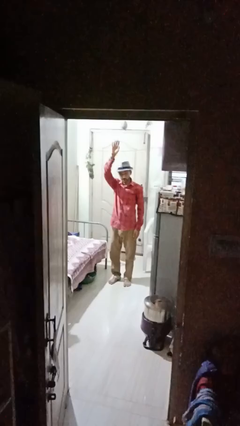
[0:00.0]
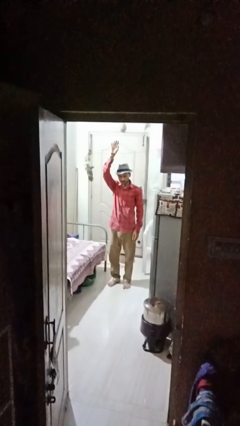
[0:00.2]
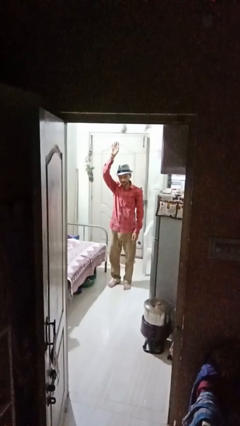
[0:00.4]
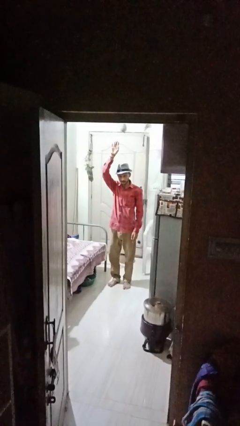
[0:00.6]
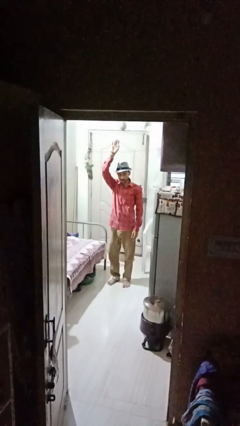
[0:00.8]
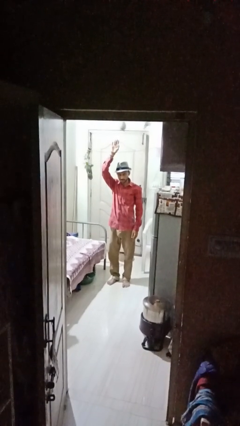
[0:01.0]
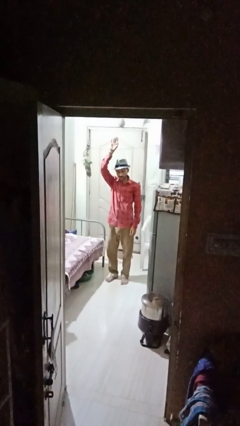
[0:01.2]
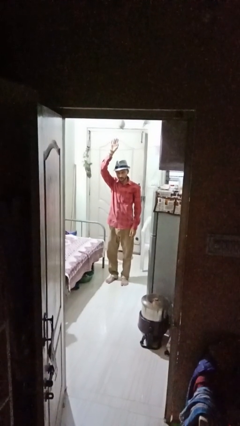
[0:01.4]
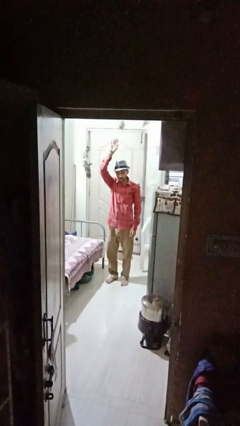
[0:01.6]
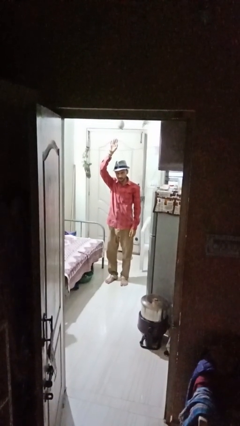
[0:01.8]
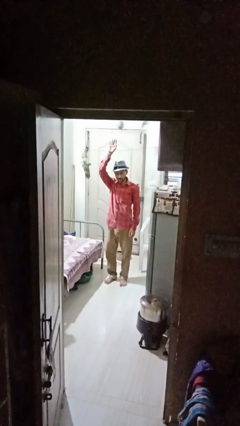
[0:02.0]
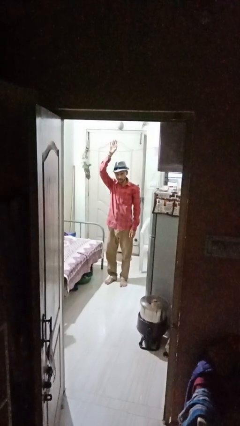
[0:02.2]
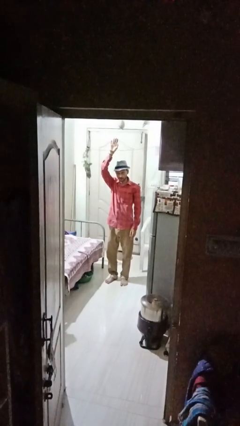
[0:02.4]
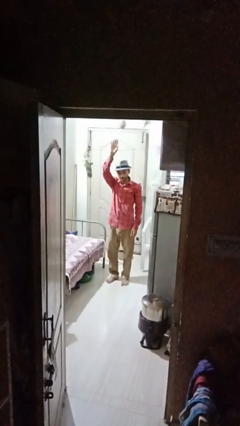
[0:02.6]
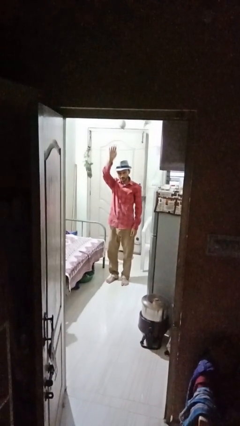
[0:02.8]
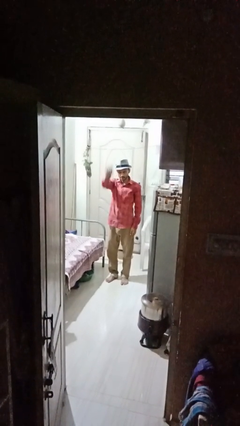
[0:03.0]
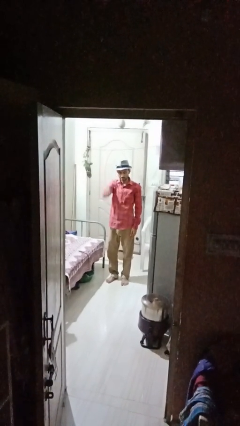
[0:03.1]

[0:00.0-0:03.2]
person gestures raise hand

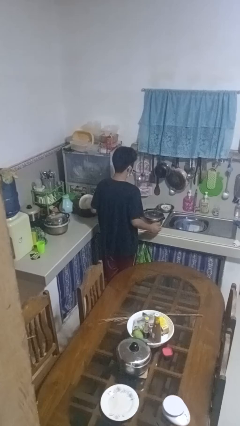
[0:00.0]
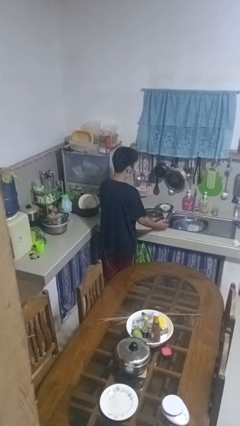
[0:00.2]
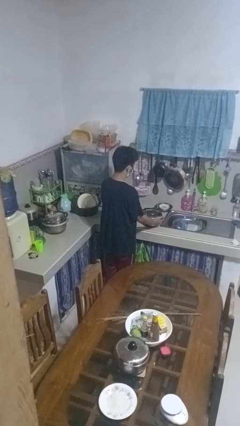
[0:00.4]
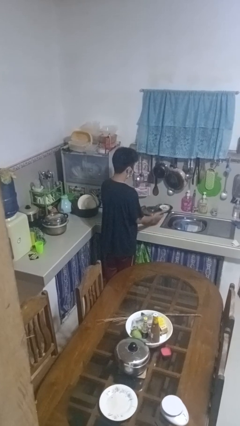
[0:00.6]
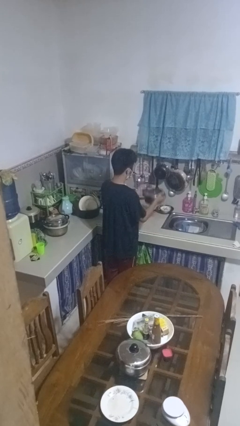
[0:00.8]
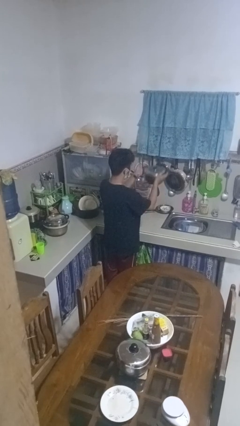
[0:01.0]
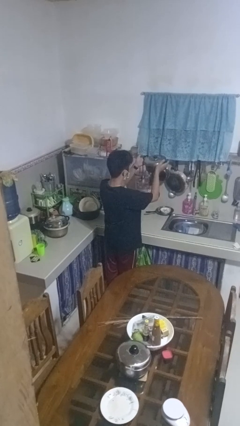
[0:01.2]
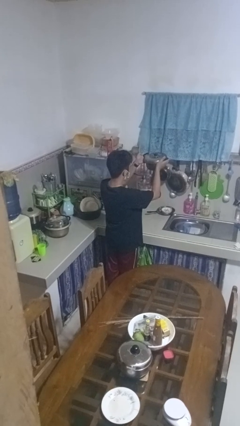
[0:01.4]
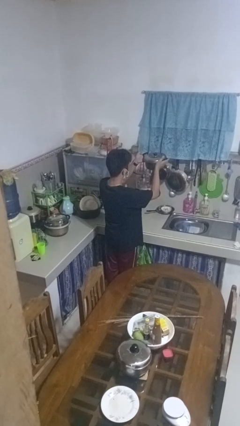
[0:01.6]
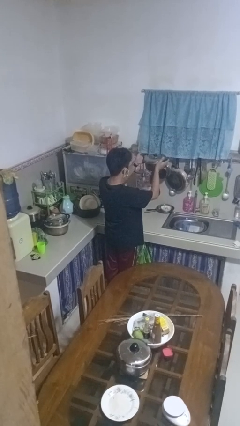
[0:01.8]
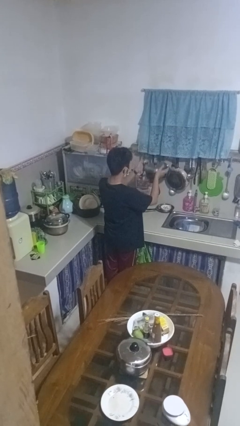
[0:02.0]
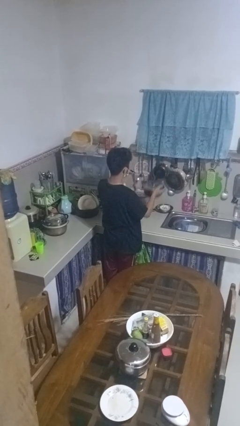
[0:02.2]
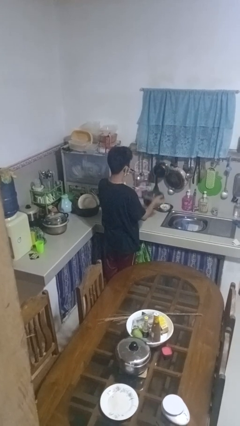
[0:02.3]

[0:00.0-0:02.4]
person picks up object from countertop

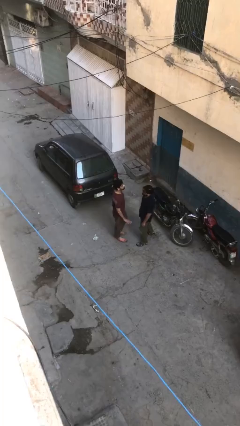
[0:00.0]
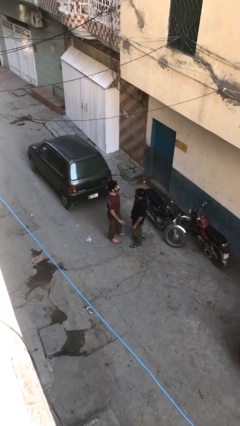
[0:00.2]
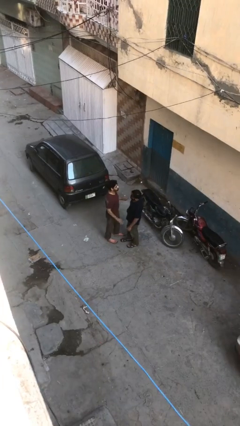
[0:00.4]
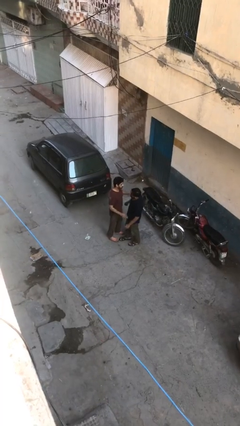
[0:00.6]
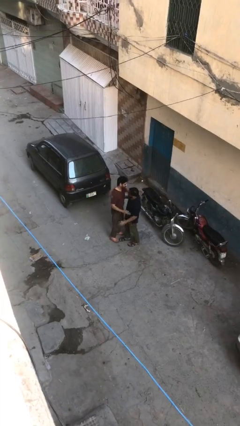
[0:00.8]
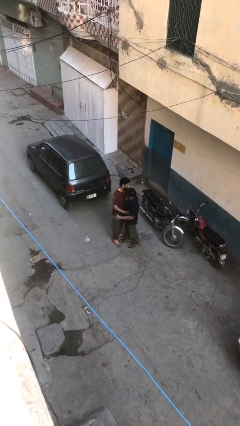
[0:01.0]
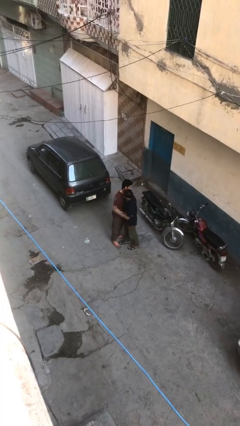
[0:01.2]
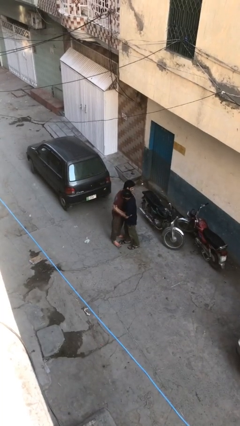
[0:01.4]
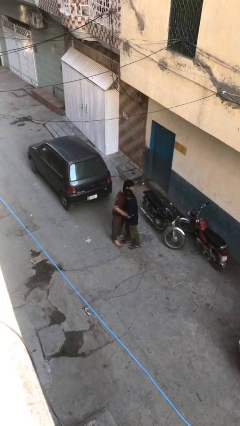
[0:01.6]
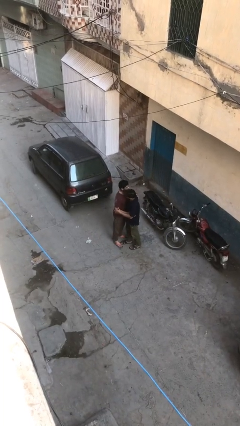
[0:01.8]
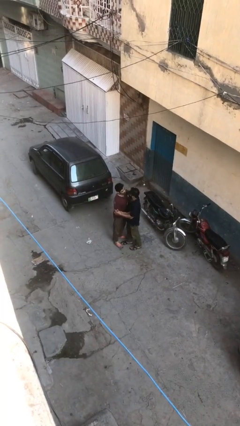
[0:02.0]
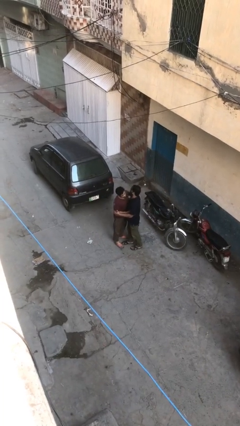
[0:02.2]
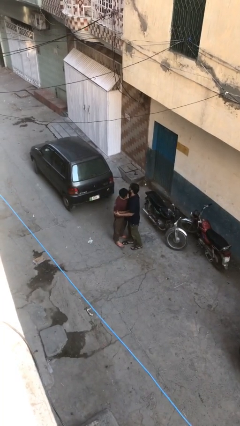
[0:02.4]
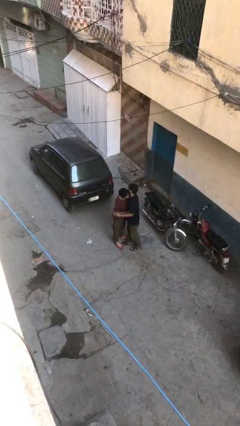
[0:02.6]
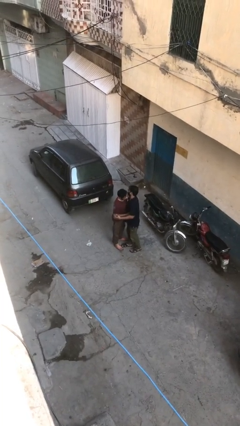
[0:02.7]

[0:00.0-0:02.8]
person embraces person

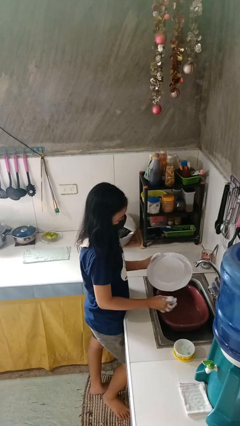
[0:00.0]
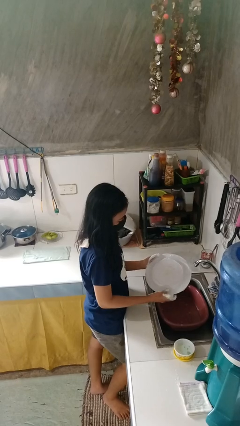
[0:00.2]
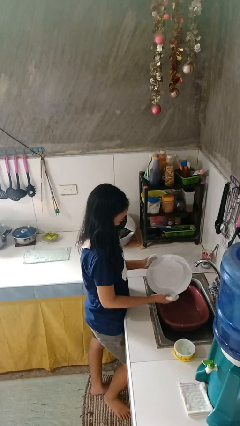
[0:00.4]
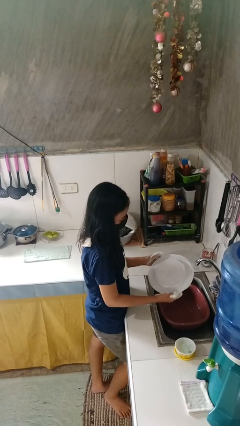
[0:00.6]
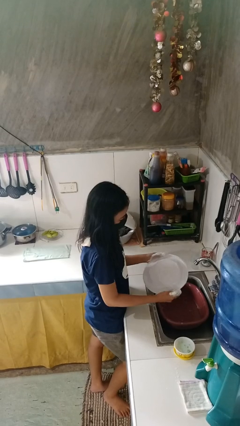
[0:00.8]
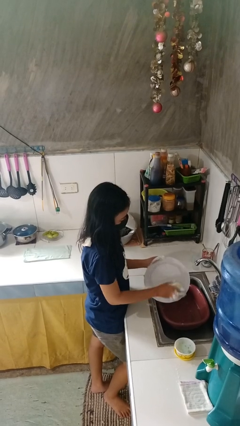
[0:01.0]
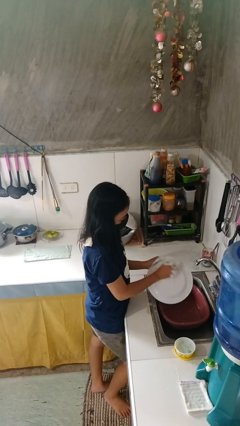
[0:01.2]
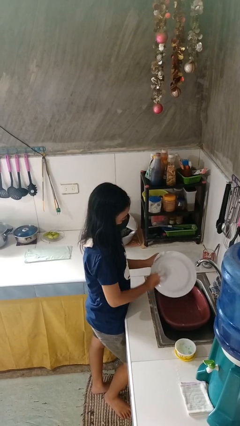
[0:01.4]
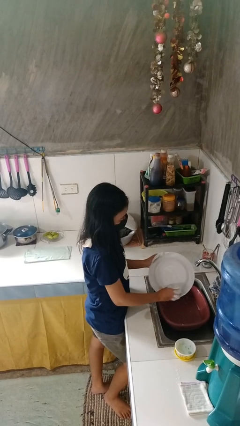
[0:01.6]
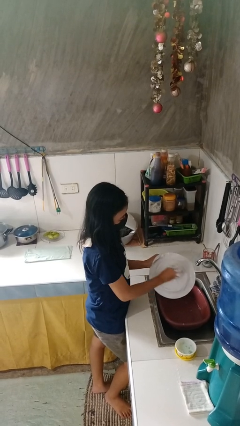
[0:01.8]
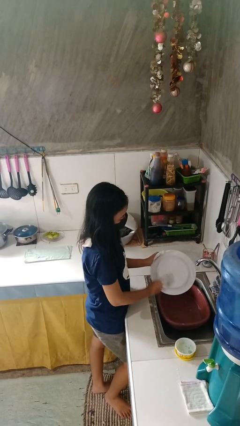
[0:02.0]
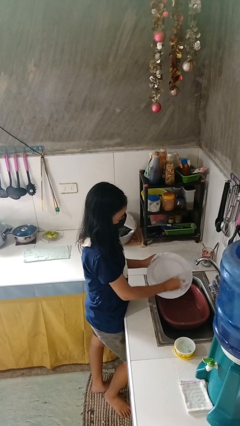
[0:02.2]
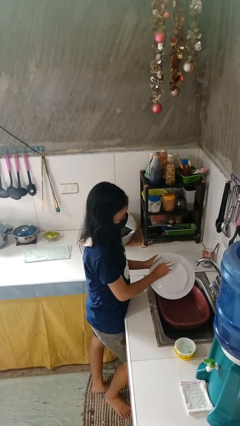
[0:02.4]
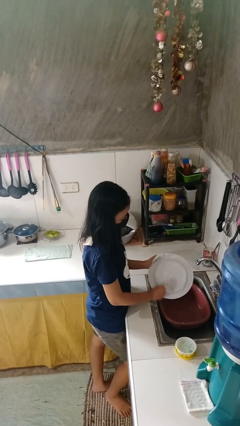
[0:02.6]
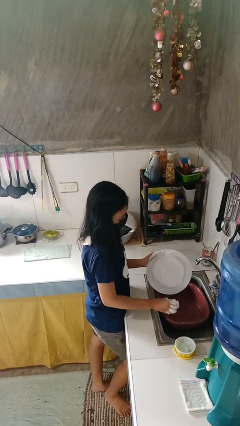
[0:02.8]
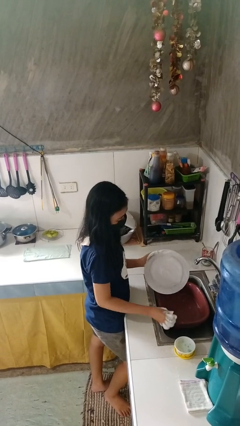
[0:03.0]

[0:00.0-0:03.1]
person washes dish

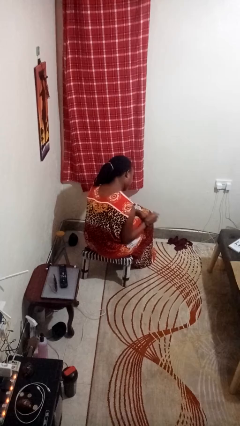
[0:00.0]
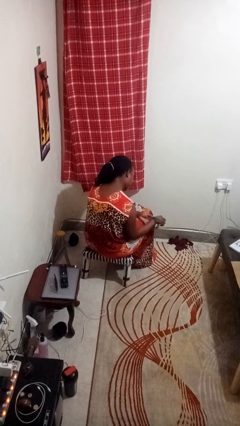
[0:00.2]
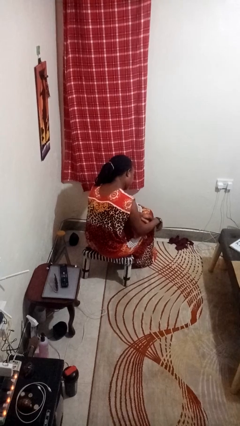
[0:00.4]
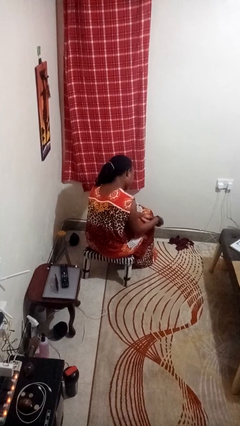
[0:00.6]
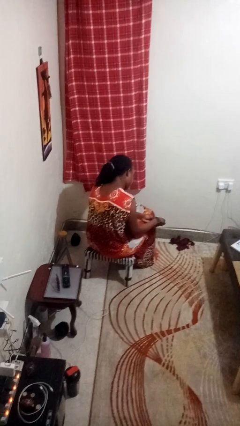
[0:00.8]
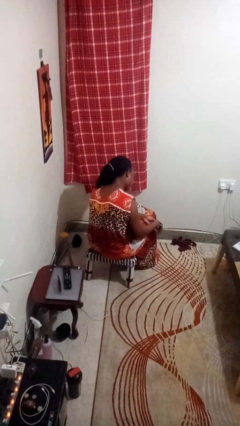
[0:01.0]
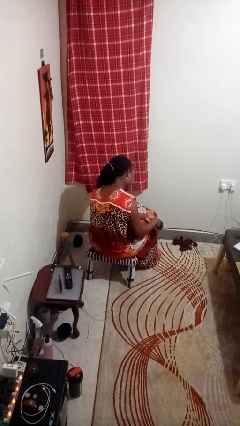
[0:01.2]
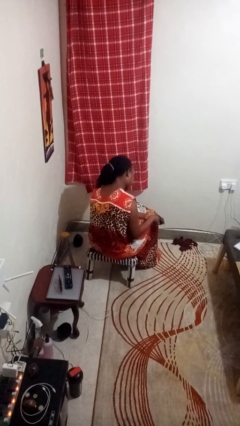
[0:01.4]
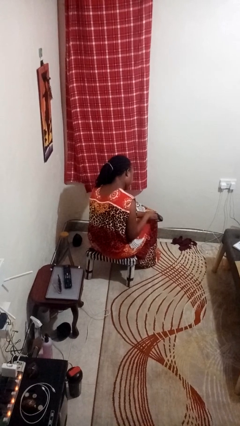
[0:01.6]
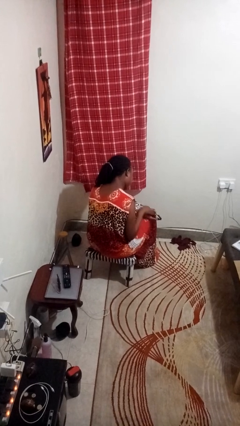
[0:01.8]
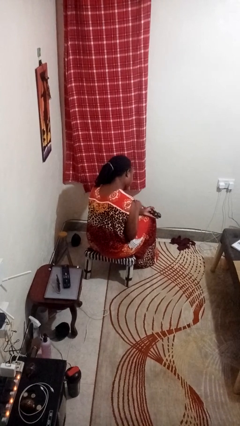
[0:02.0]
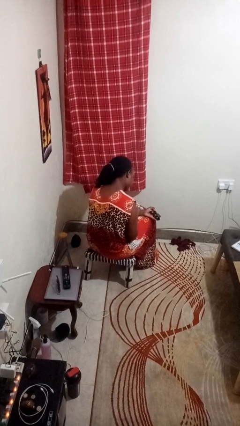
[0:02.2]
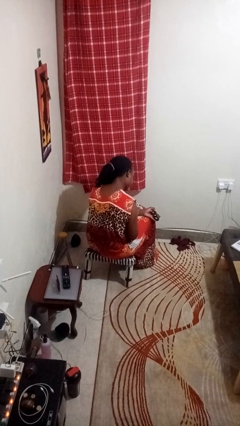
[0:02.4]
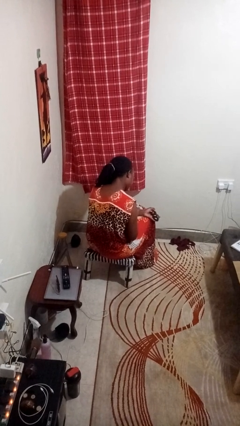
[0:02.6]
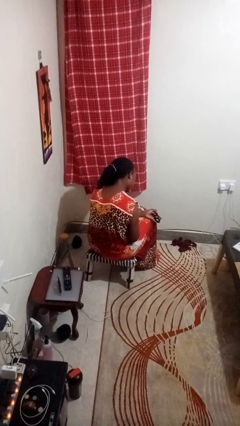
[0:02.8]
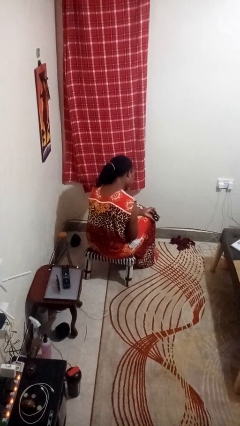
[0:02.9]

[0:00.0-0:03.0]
person takes off wristwatch

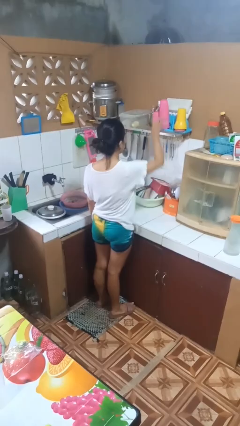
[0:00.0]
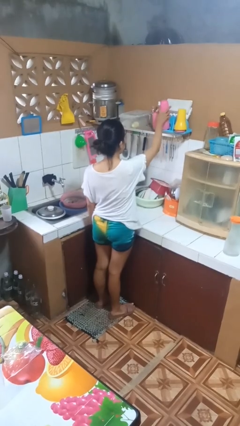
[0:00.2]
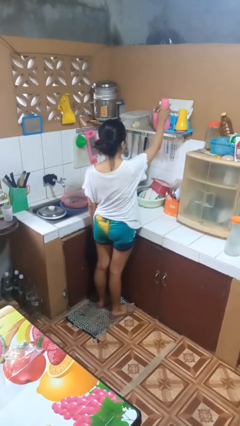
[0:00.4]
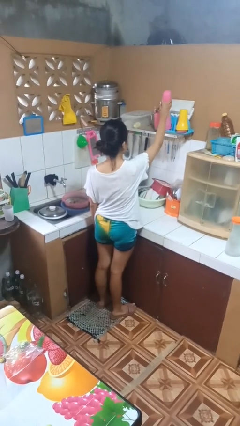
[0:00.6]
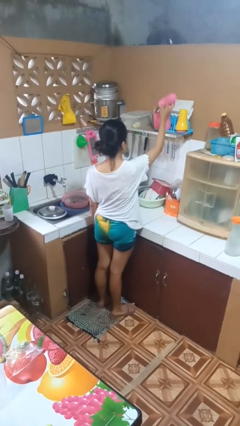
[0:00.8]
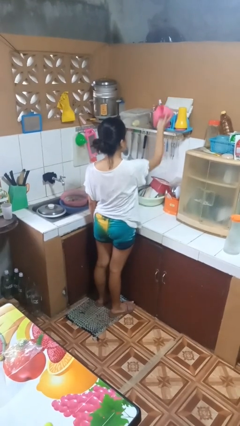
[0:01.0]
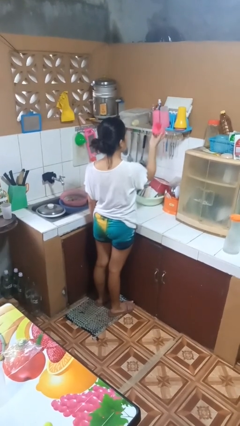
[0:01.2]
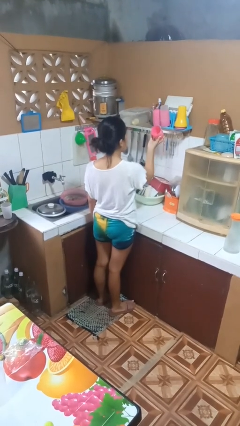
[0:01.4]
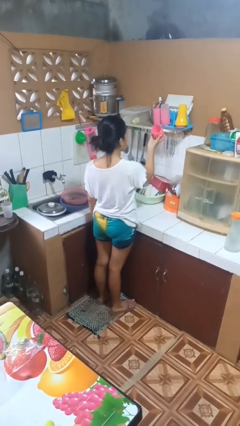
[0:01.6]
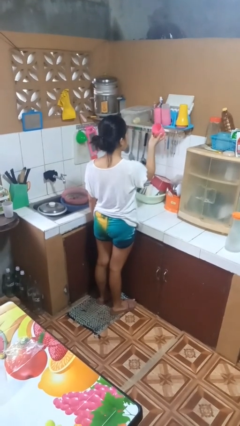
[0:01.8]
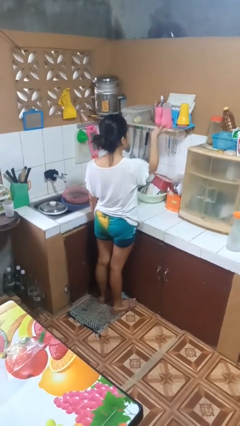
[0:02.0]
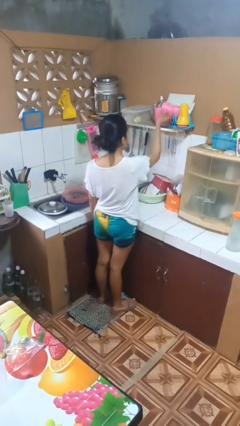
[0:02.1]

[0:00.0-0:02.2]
person picks up object from shelf

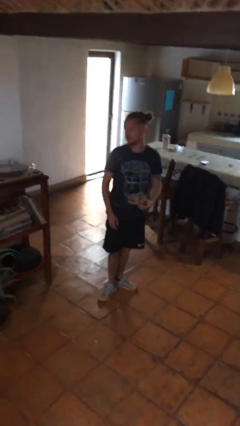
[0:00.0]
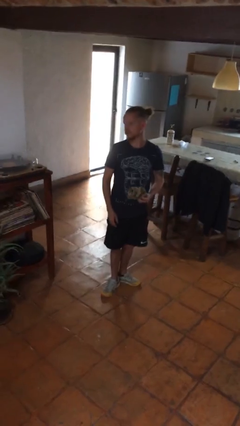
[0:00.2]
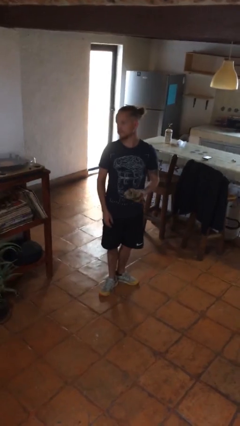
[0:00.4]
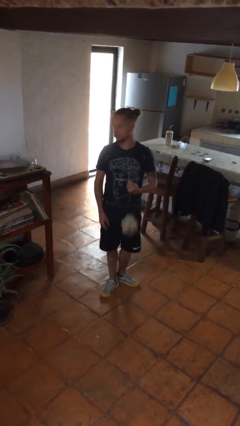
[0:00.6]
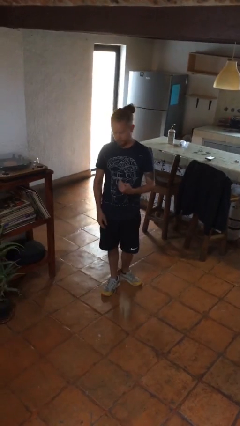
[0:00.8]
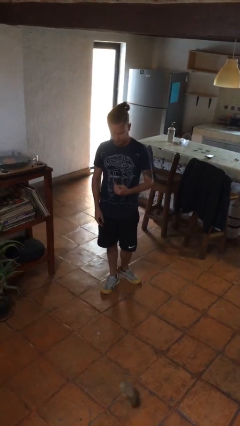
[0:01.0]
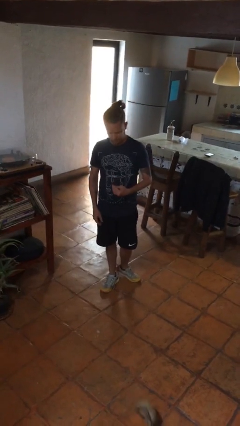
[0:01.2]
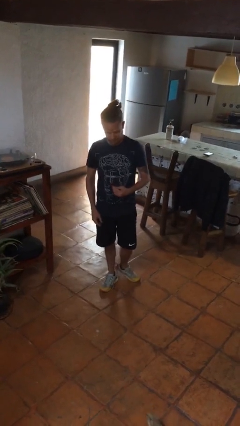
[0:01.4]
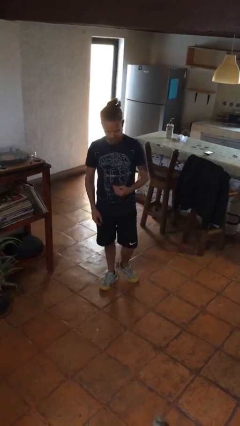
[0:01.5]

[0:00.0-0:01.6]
person drops object
